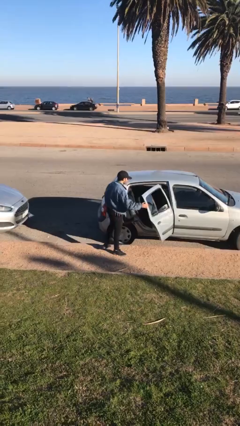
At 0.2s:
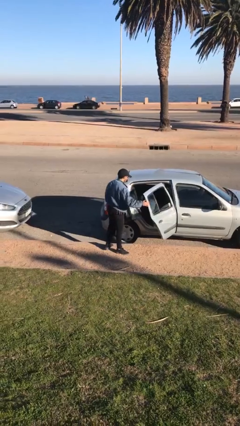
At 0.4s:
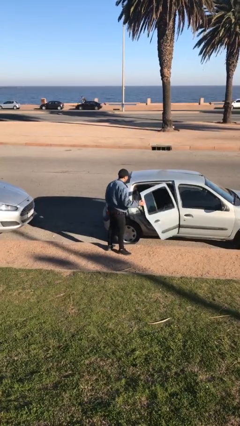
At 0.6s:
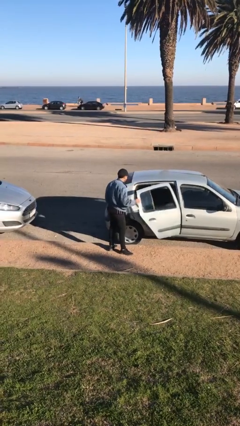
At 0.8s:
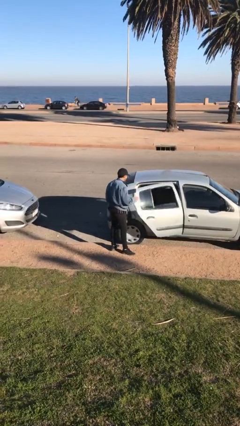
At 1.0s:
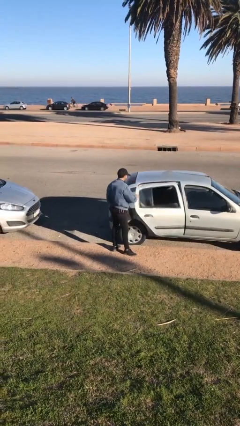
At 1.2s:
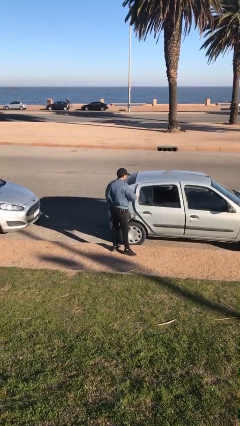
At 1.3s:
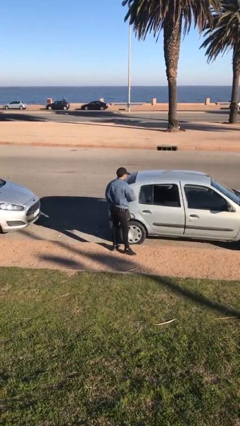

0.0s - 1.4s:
person closes car door

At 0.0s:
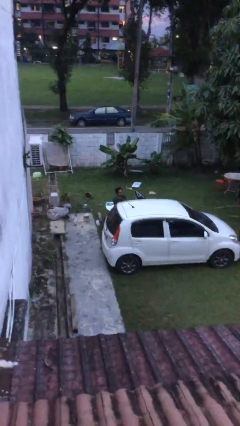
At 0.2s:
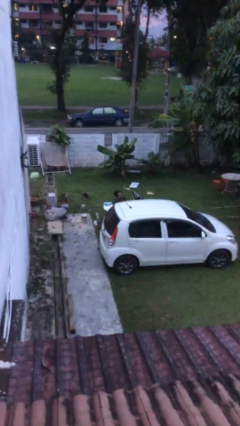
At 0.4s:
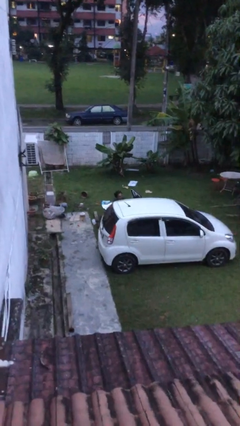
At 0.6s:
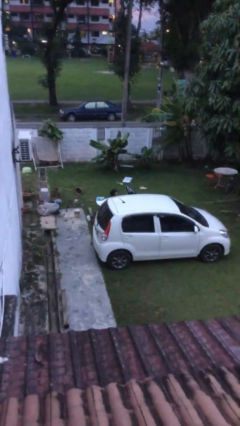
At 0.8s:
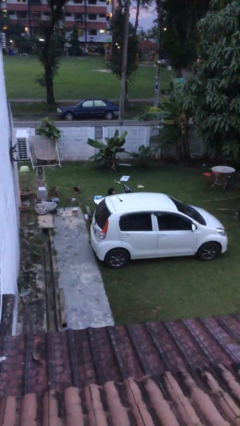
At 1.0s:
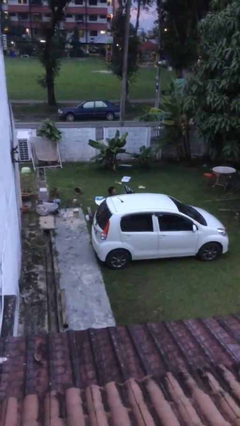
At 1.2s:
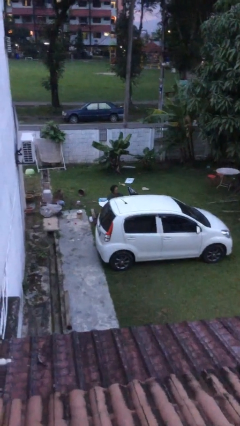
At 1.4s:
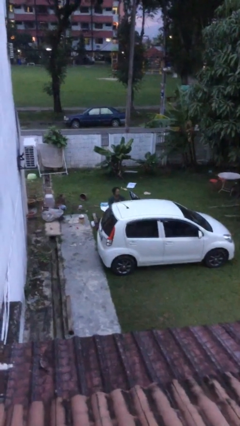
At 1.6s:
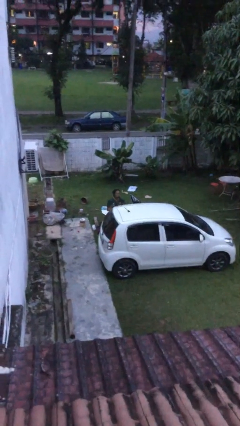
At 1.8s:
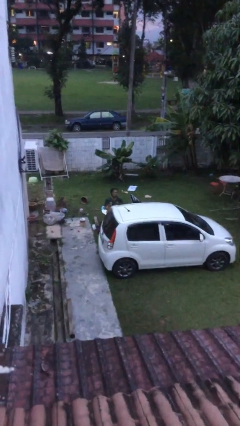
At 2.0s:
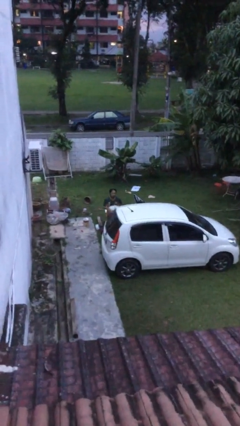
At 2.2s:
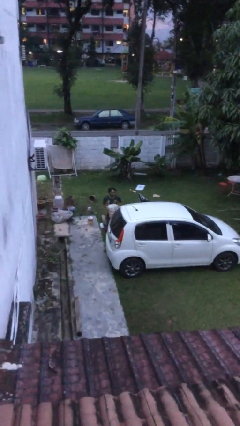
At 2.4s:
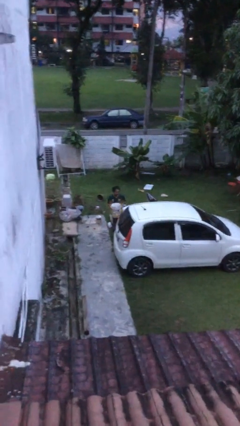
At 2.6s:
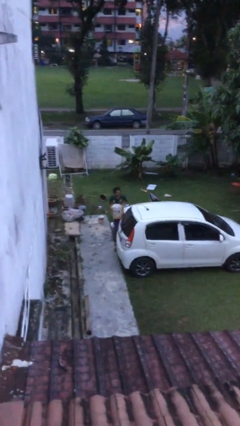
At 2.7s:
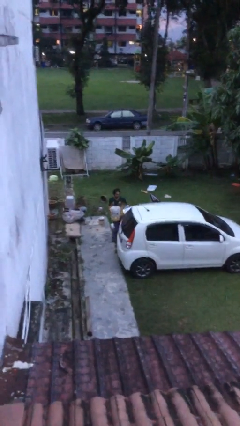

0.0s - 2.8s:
person unloads car

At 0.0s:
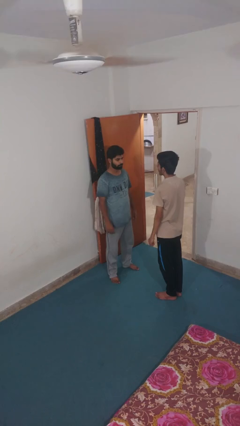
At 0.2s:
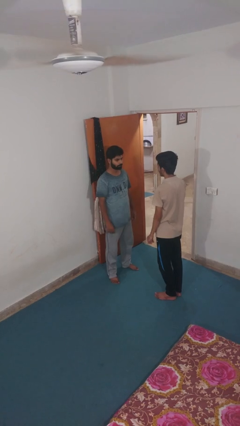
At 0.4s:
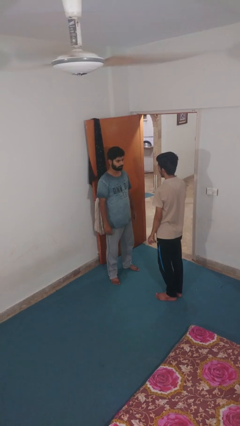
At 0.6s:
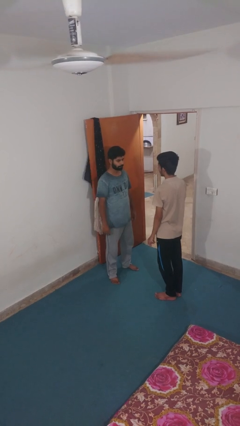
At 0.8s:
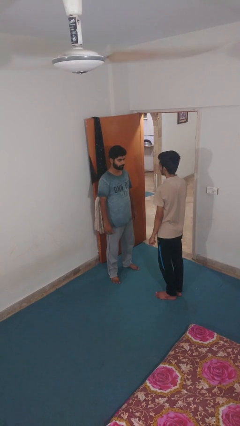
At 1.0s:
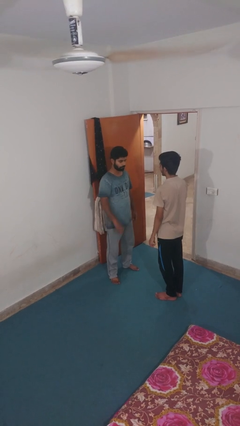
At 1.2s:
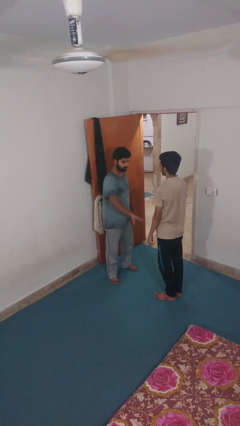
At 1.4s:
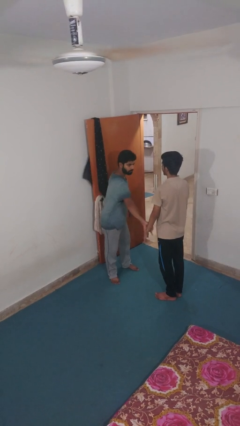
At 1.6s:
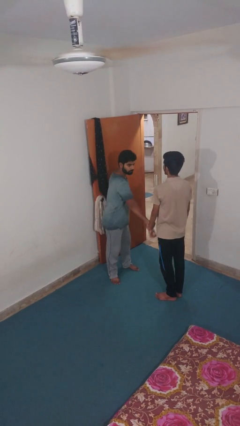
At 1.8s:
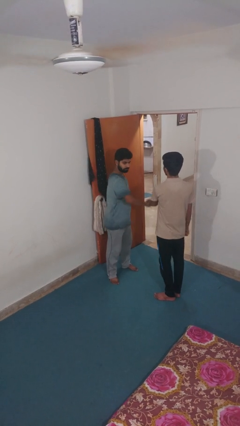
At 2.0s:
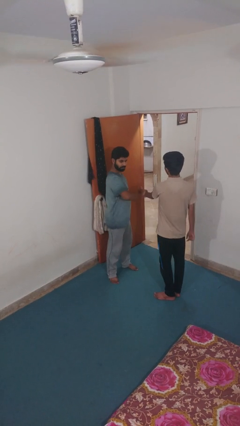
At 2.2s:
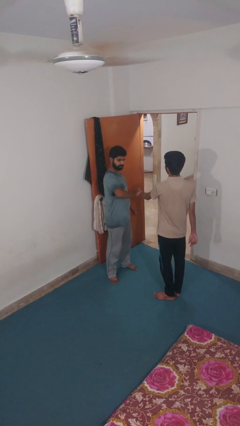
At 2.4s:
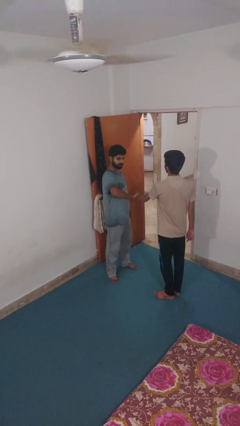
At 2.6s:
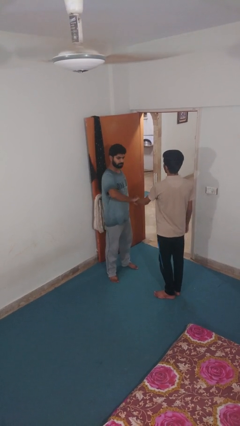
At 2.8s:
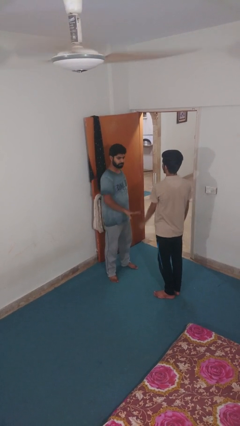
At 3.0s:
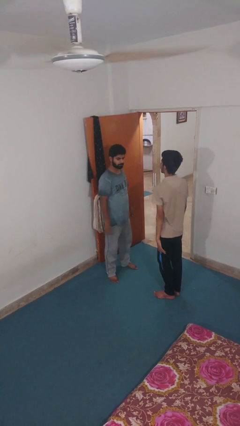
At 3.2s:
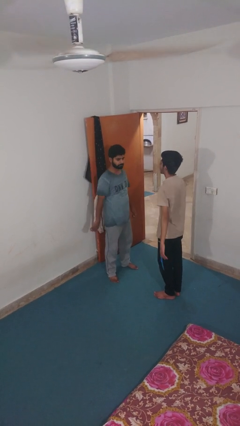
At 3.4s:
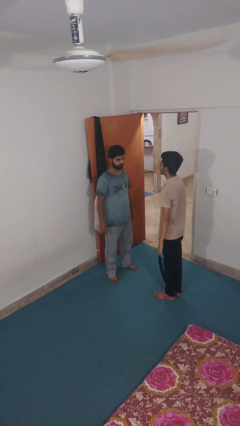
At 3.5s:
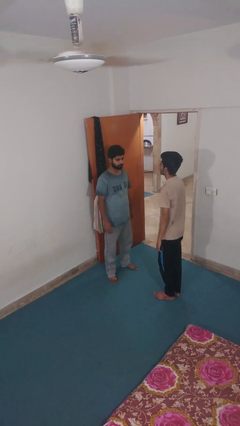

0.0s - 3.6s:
person grabs person by forearm

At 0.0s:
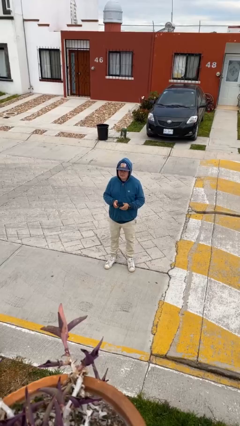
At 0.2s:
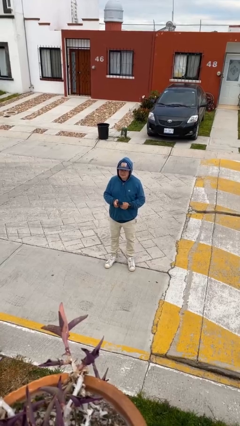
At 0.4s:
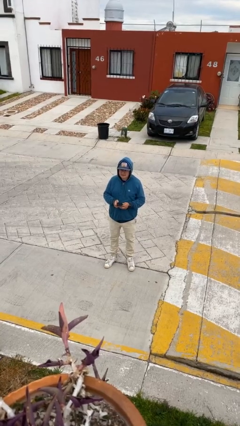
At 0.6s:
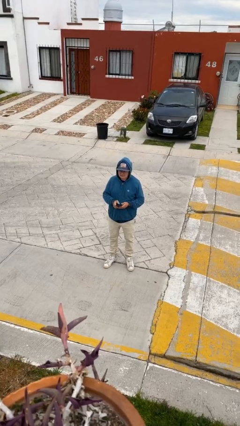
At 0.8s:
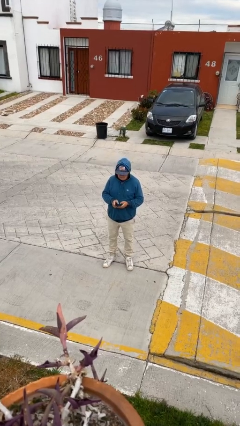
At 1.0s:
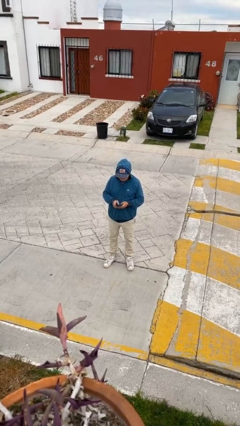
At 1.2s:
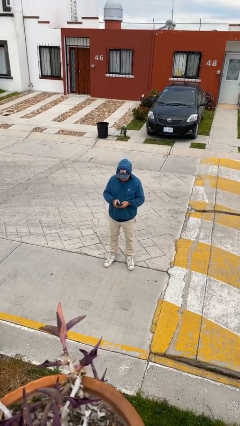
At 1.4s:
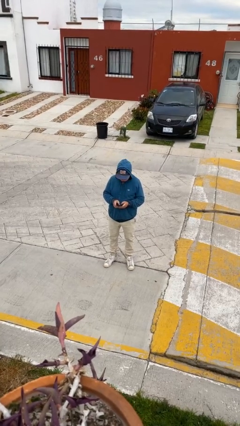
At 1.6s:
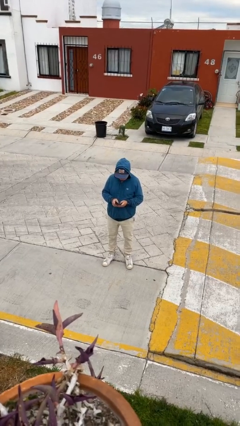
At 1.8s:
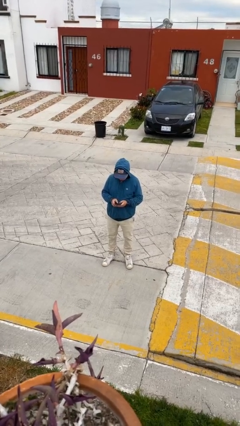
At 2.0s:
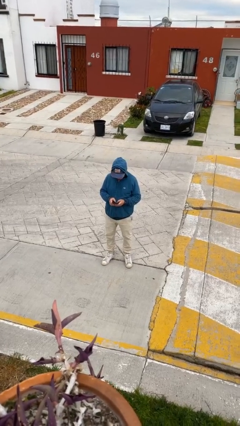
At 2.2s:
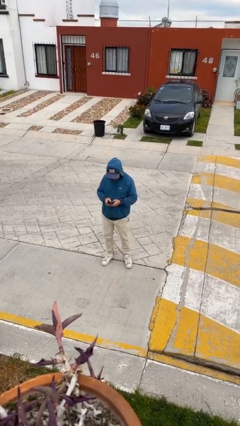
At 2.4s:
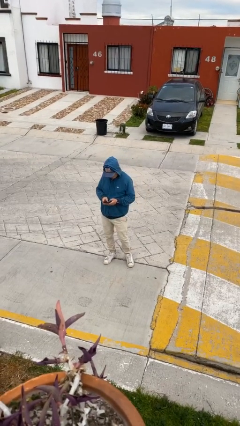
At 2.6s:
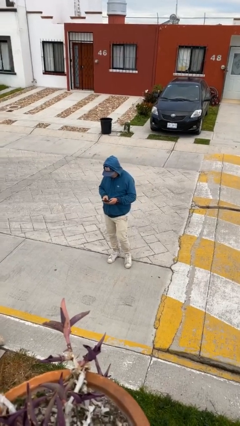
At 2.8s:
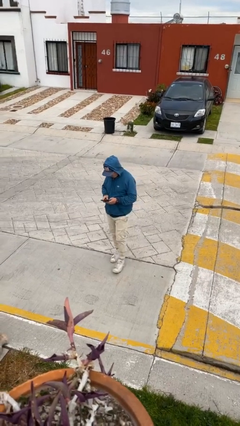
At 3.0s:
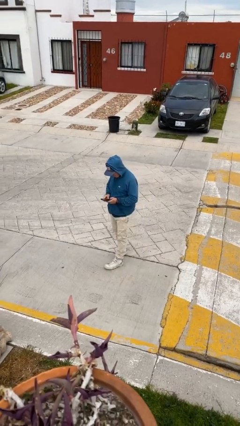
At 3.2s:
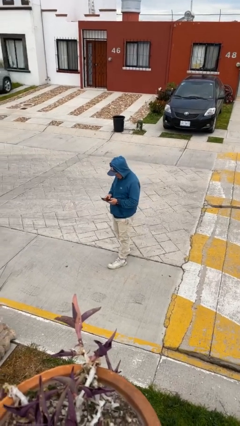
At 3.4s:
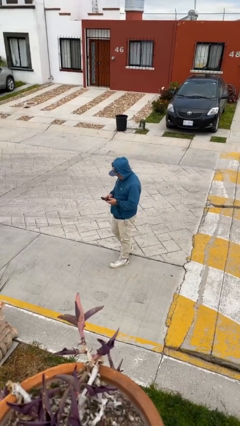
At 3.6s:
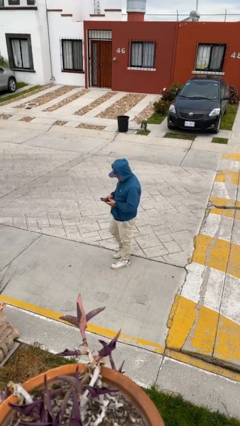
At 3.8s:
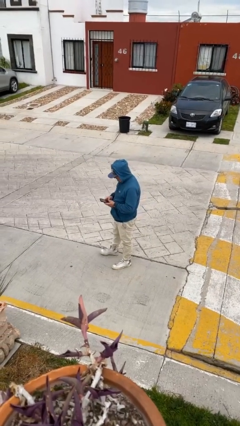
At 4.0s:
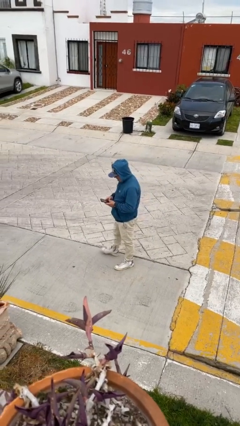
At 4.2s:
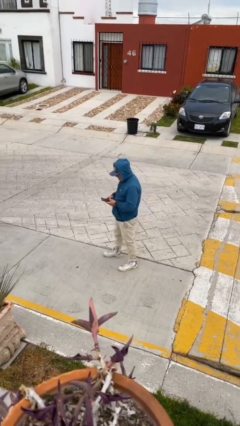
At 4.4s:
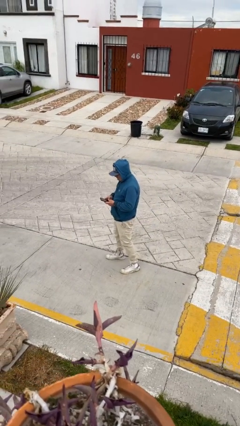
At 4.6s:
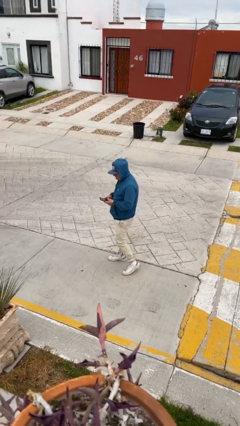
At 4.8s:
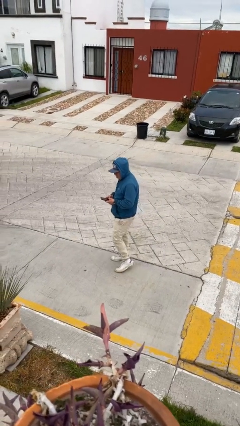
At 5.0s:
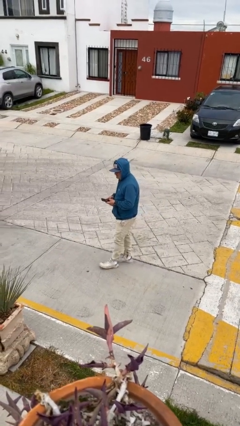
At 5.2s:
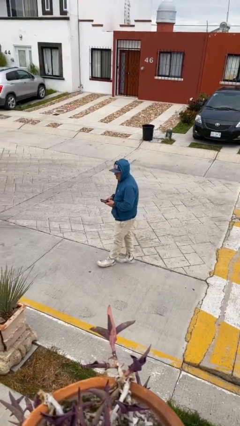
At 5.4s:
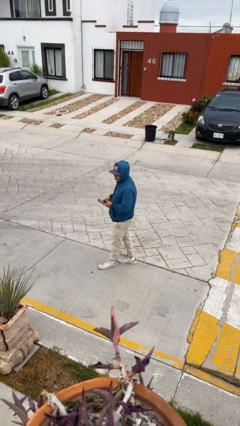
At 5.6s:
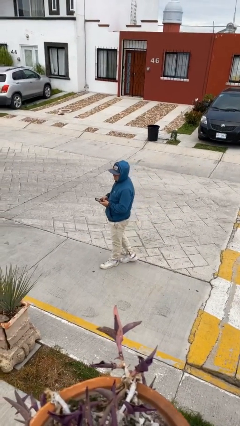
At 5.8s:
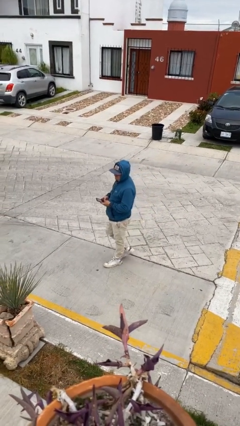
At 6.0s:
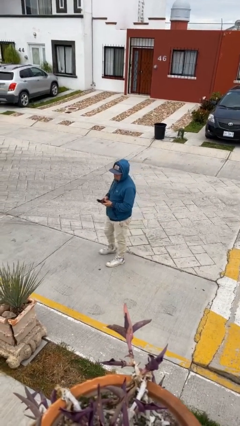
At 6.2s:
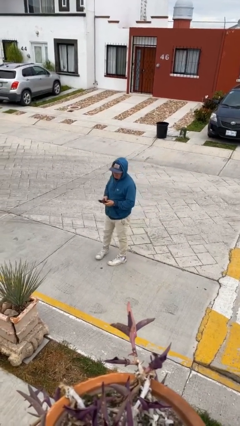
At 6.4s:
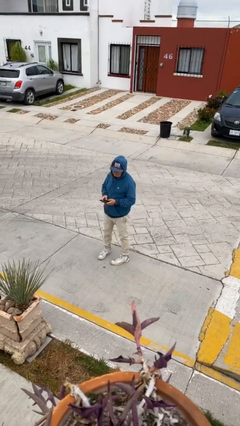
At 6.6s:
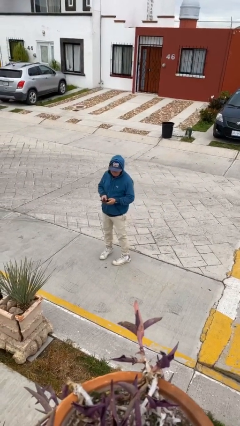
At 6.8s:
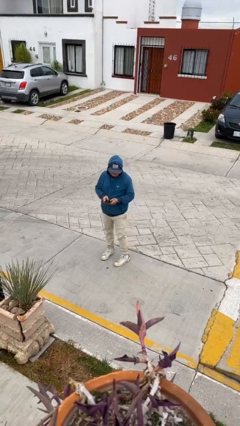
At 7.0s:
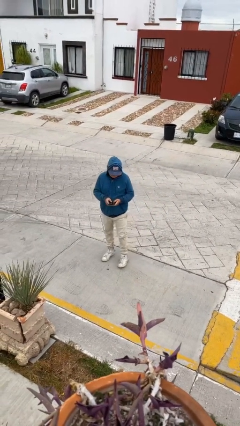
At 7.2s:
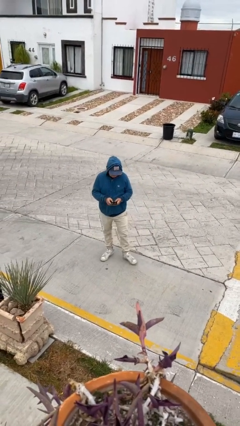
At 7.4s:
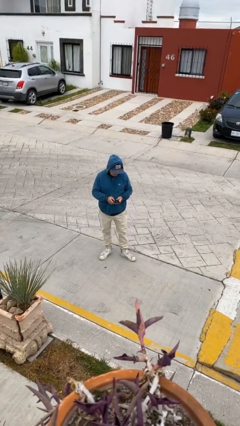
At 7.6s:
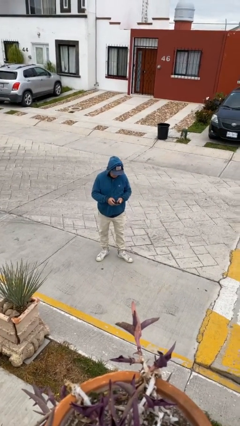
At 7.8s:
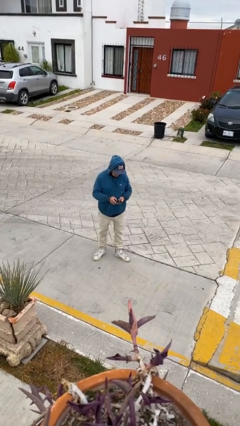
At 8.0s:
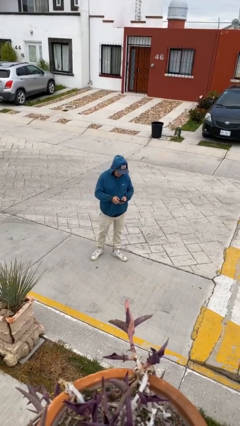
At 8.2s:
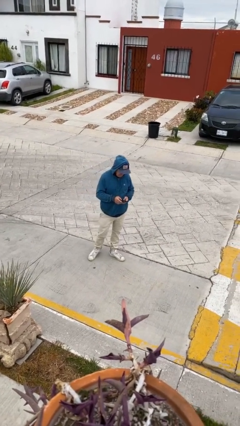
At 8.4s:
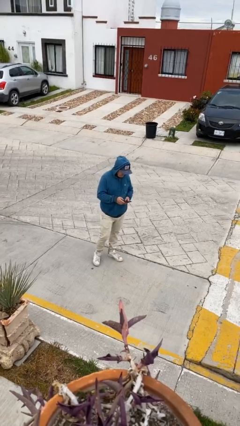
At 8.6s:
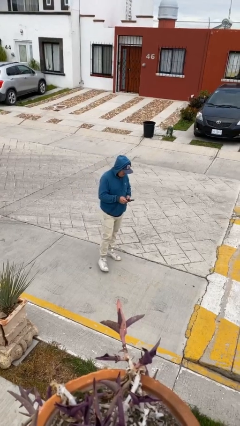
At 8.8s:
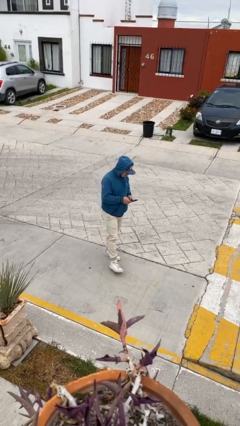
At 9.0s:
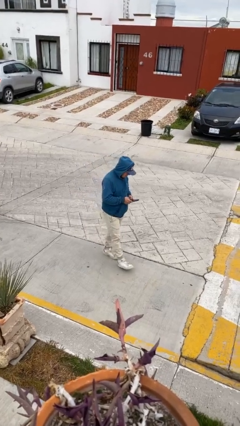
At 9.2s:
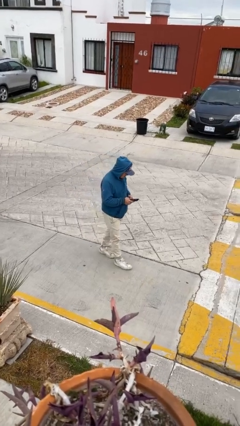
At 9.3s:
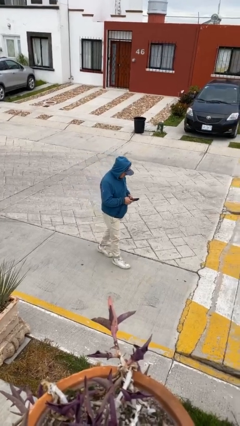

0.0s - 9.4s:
person texts on phone

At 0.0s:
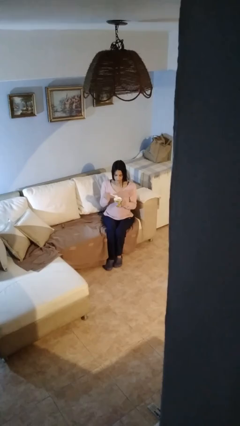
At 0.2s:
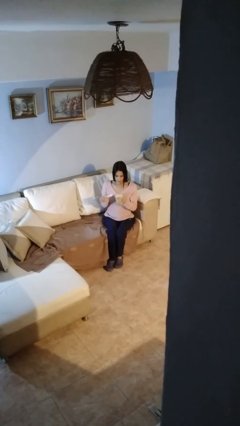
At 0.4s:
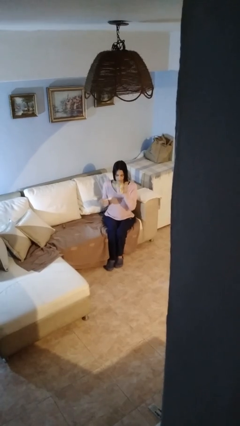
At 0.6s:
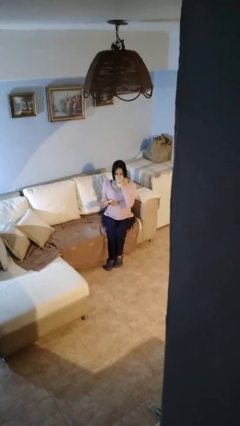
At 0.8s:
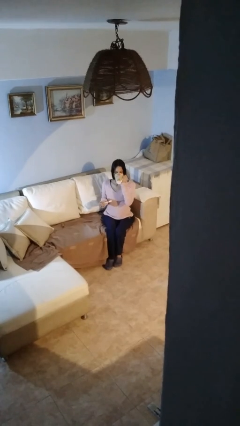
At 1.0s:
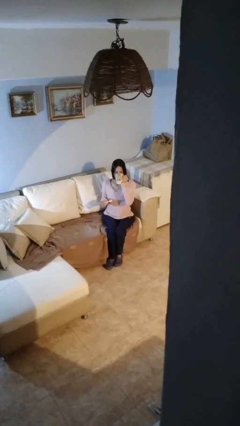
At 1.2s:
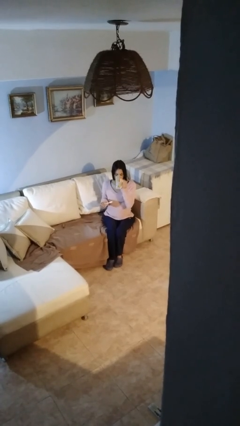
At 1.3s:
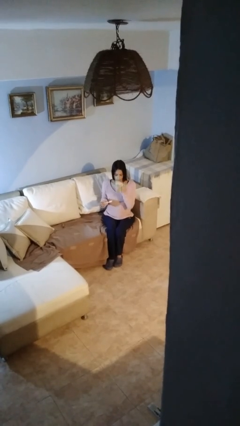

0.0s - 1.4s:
person drinks from mug
